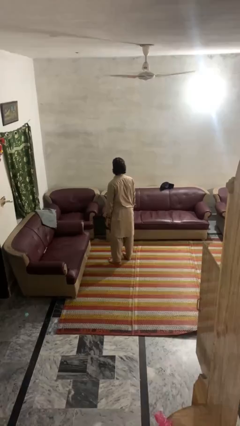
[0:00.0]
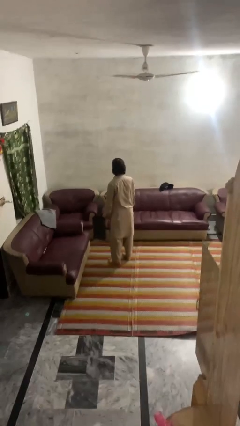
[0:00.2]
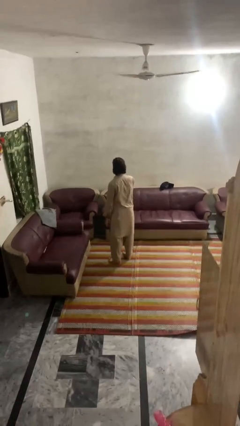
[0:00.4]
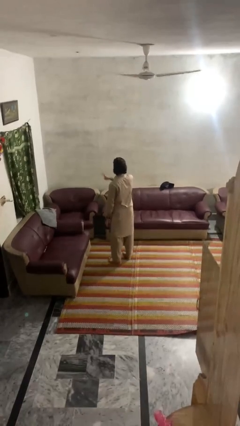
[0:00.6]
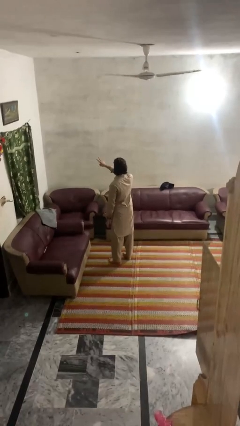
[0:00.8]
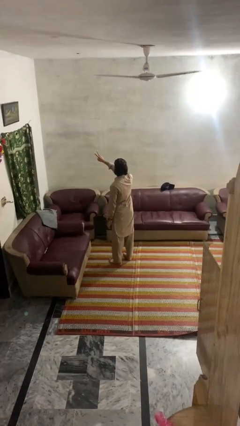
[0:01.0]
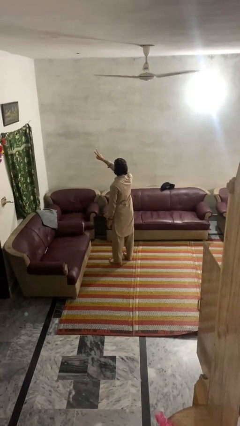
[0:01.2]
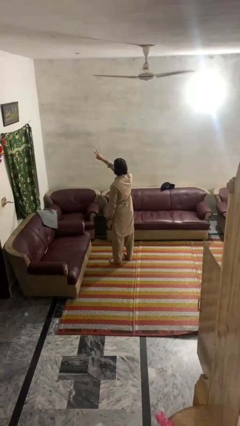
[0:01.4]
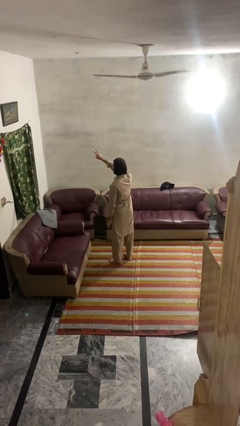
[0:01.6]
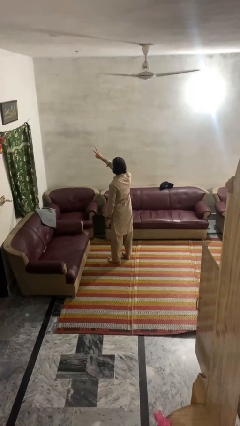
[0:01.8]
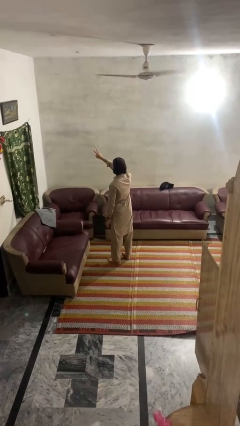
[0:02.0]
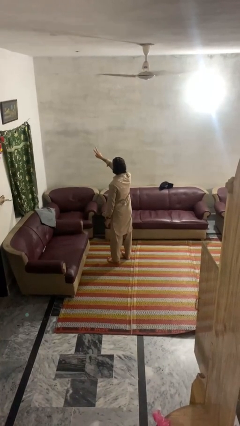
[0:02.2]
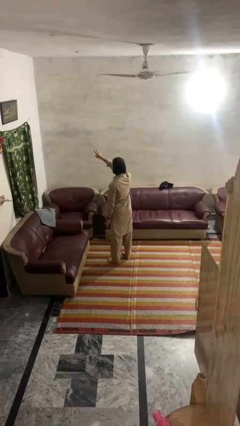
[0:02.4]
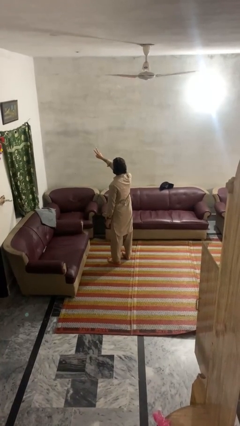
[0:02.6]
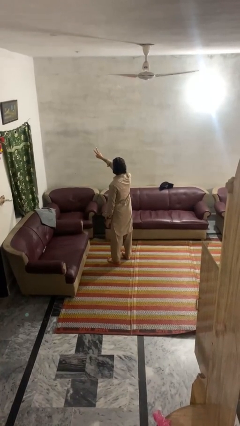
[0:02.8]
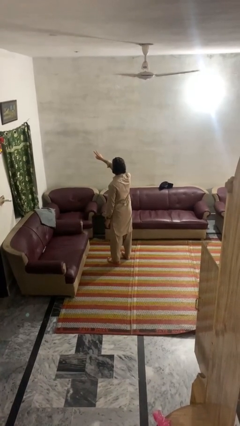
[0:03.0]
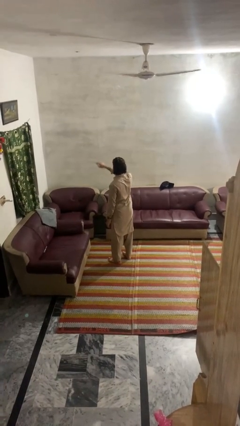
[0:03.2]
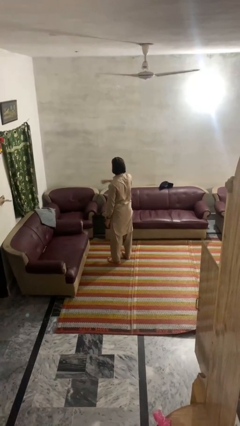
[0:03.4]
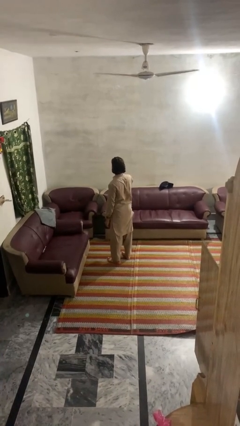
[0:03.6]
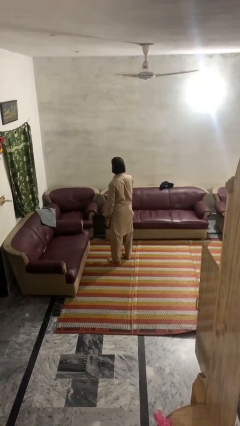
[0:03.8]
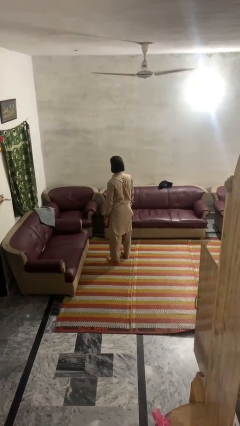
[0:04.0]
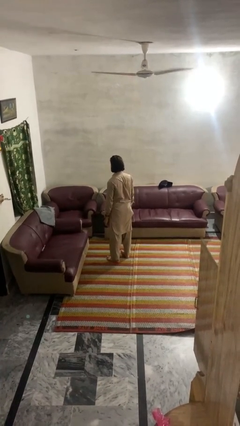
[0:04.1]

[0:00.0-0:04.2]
person gestures peace

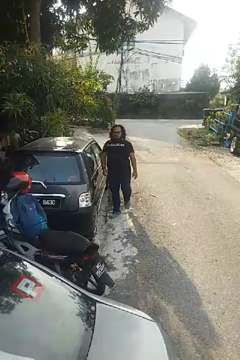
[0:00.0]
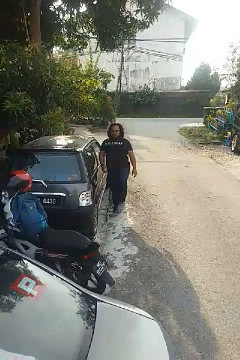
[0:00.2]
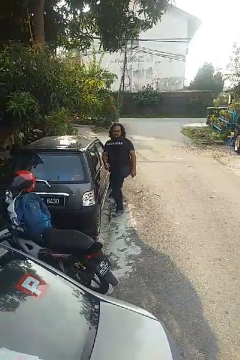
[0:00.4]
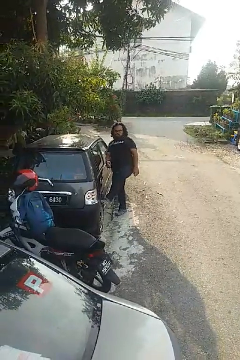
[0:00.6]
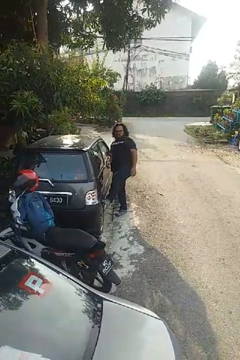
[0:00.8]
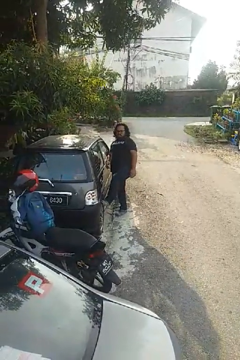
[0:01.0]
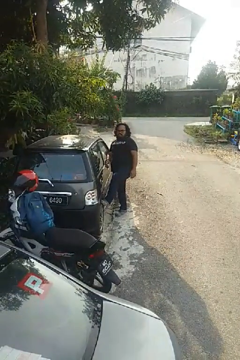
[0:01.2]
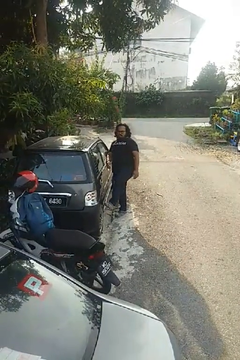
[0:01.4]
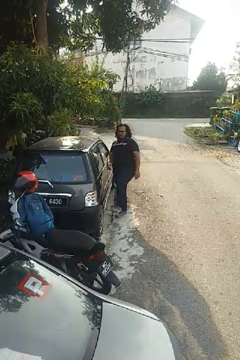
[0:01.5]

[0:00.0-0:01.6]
person kicks car tires

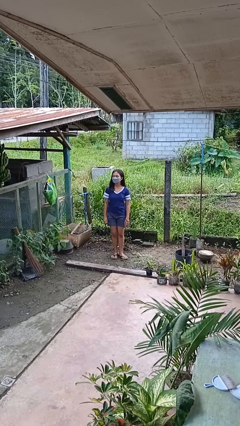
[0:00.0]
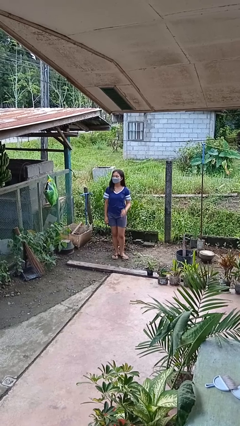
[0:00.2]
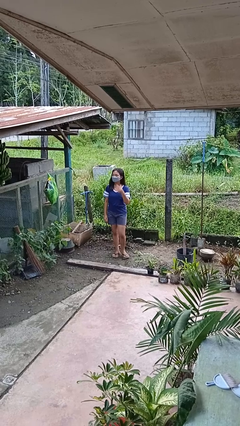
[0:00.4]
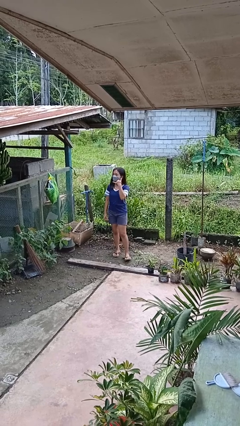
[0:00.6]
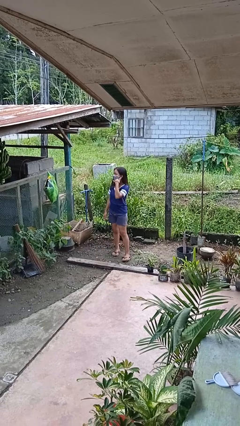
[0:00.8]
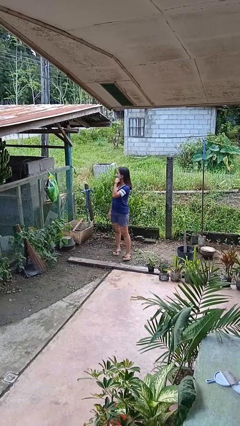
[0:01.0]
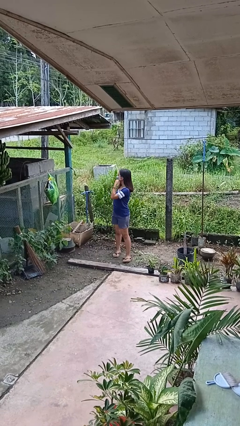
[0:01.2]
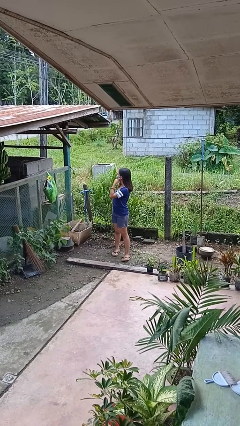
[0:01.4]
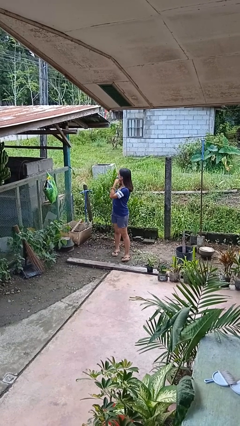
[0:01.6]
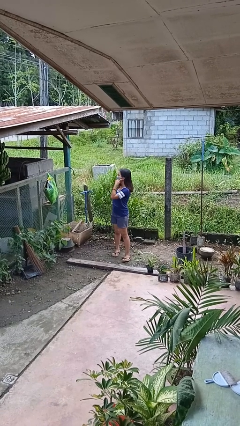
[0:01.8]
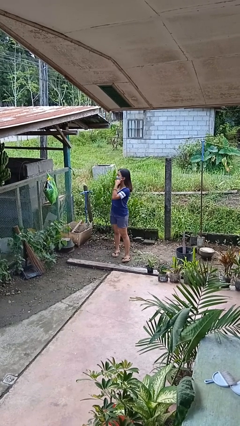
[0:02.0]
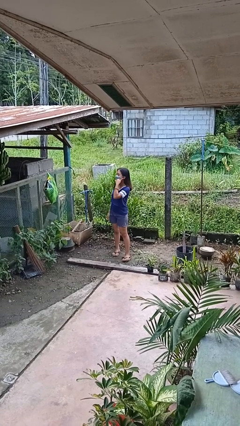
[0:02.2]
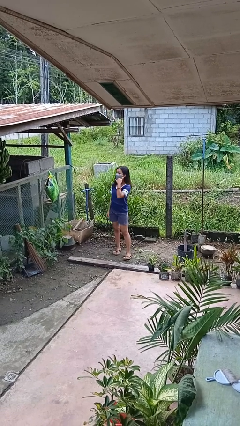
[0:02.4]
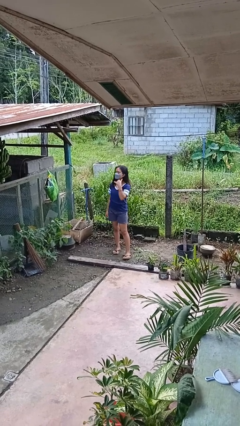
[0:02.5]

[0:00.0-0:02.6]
person gestures call me

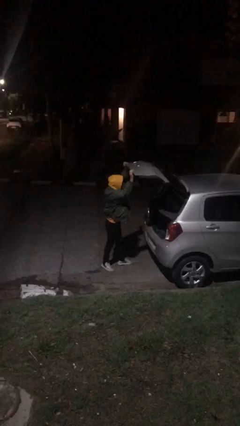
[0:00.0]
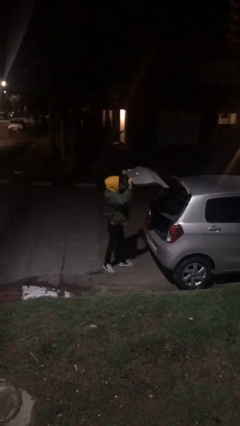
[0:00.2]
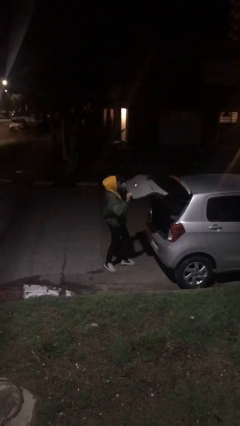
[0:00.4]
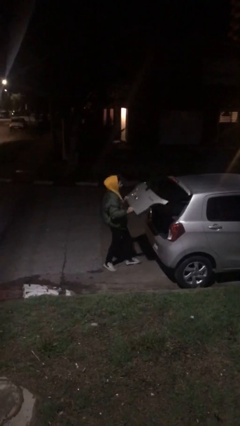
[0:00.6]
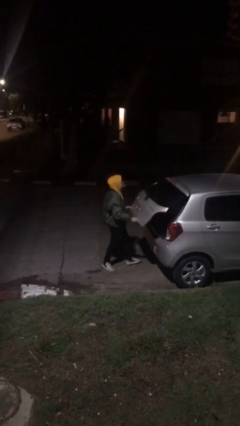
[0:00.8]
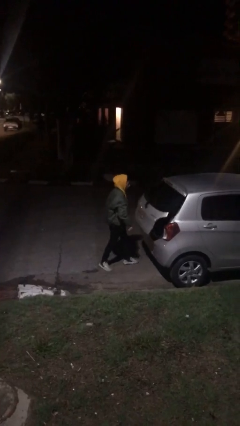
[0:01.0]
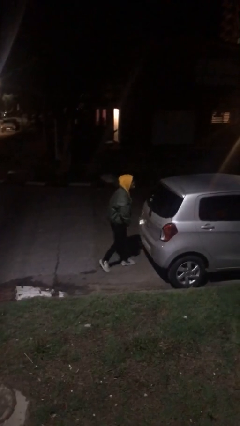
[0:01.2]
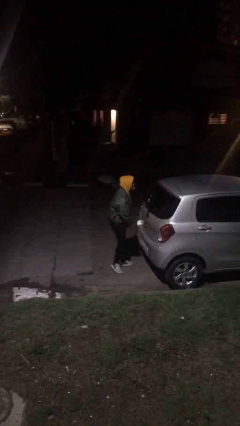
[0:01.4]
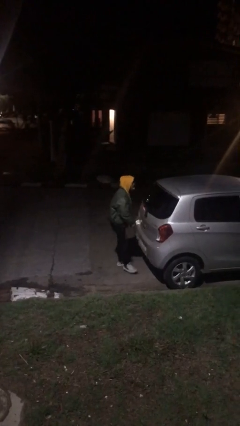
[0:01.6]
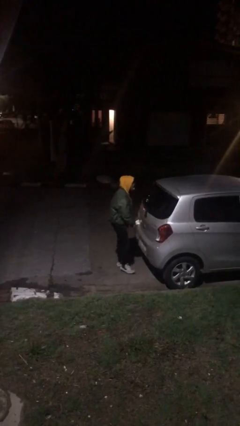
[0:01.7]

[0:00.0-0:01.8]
person closes car trunk

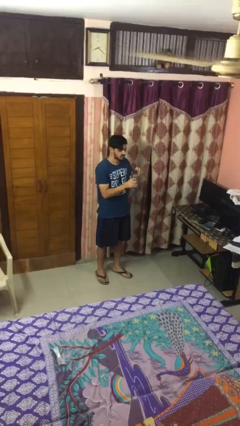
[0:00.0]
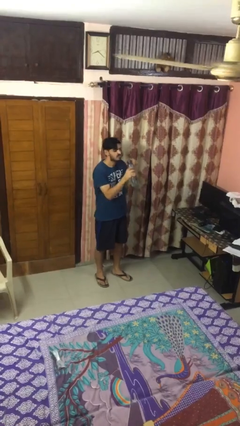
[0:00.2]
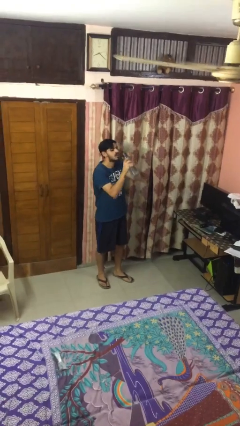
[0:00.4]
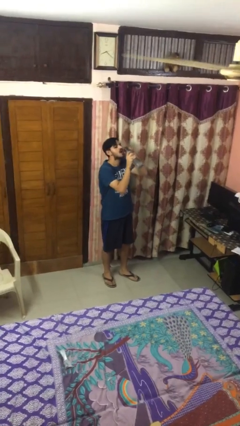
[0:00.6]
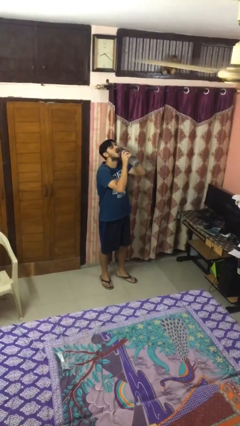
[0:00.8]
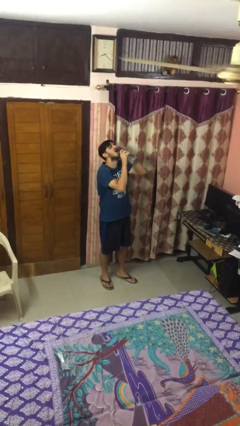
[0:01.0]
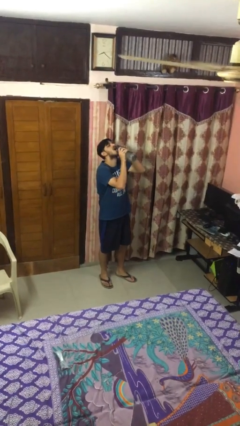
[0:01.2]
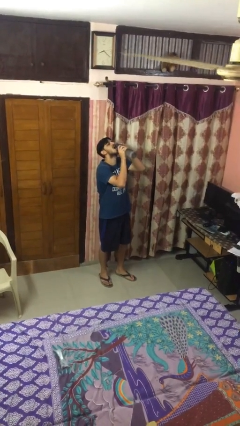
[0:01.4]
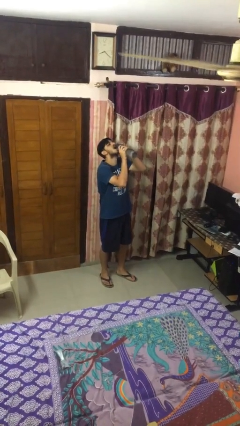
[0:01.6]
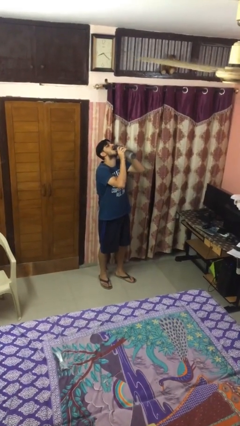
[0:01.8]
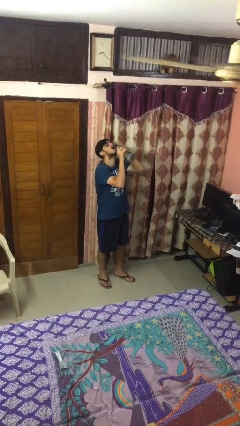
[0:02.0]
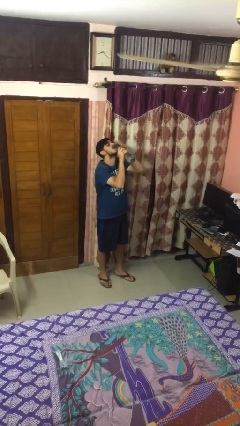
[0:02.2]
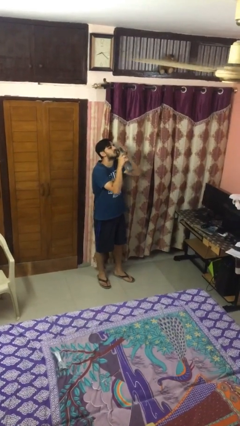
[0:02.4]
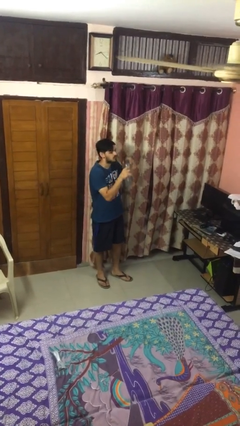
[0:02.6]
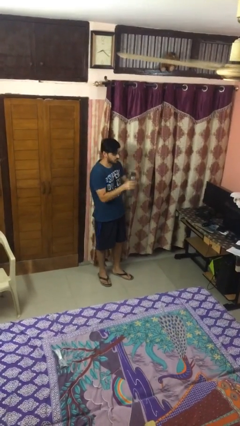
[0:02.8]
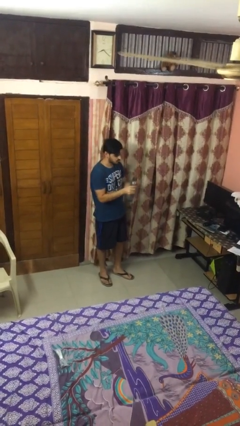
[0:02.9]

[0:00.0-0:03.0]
person drinks from bottle

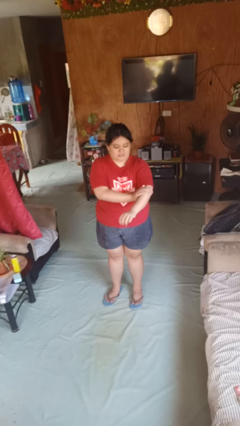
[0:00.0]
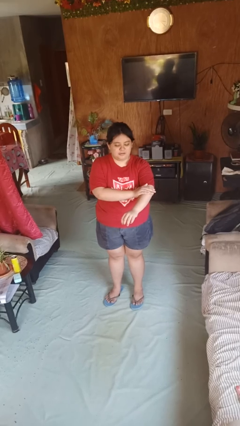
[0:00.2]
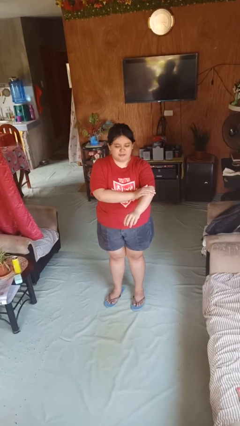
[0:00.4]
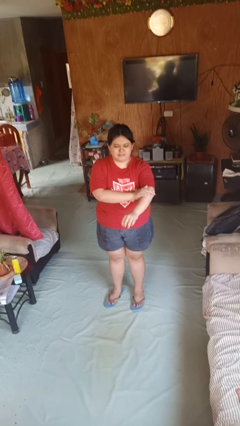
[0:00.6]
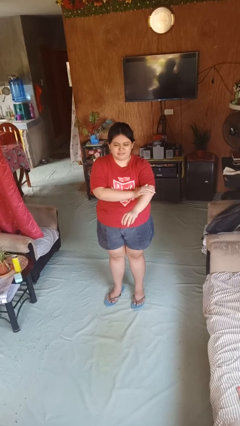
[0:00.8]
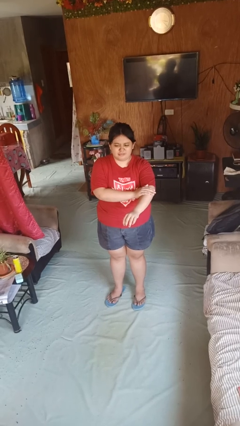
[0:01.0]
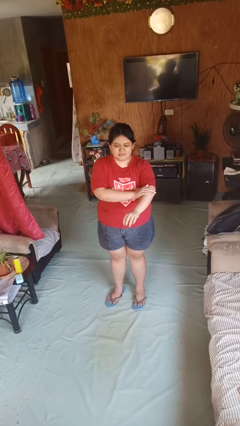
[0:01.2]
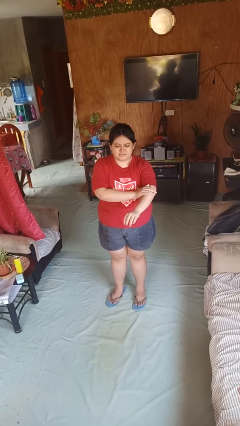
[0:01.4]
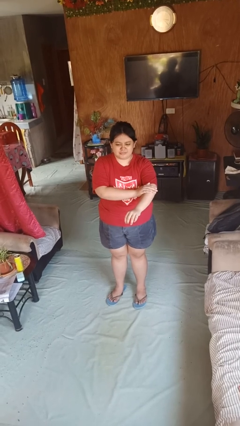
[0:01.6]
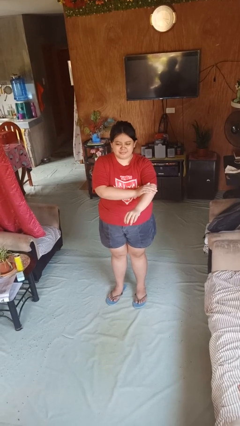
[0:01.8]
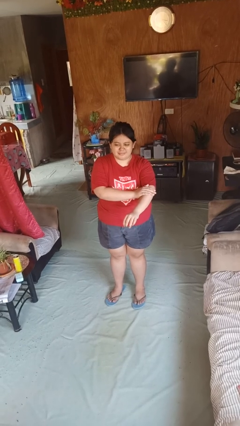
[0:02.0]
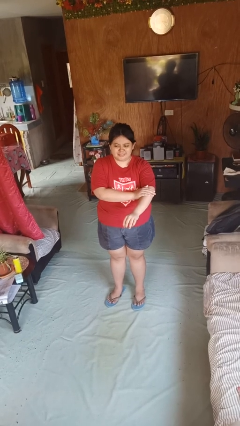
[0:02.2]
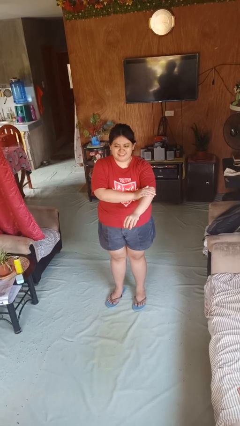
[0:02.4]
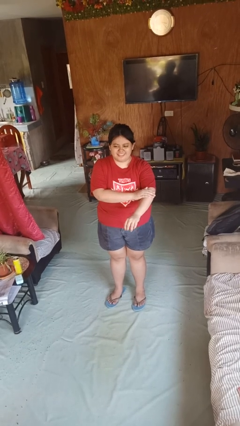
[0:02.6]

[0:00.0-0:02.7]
person swats bug

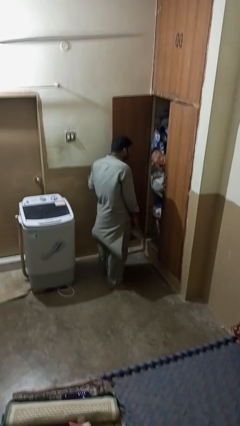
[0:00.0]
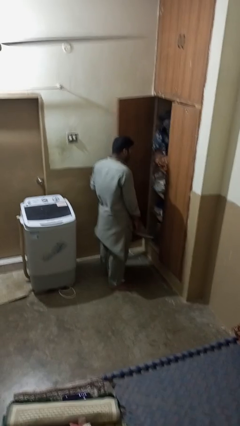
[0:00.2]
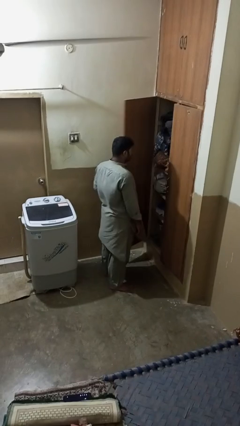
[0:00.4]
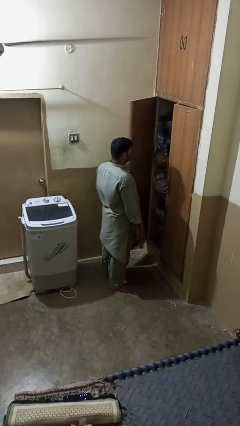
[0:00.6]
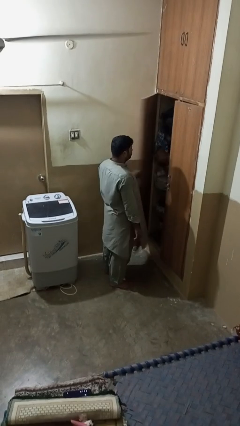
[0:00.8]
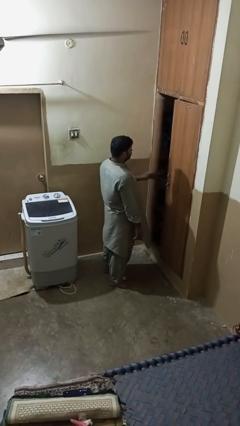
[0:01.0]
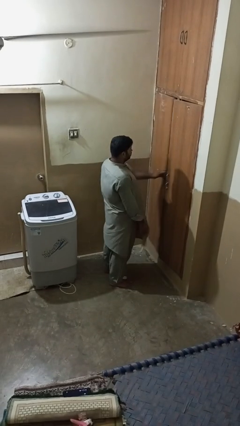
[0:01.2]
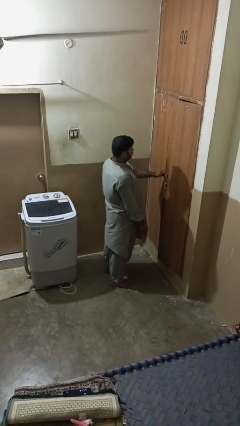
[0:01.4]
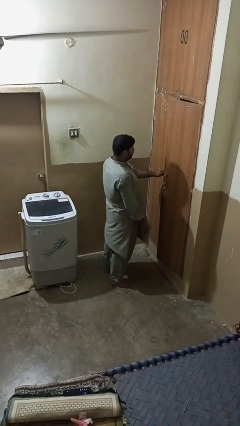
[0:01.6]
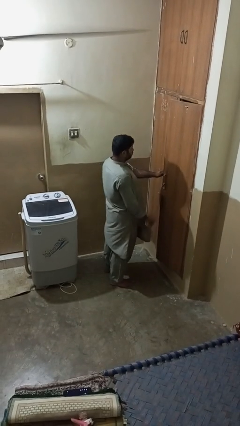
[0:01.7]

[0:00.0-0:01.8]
person closes closet door

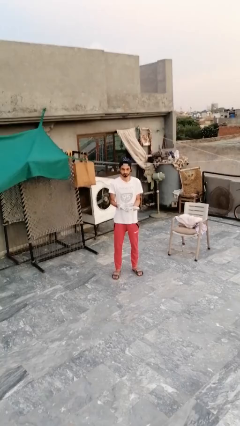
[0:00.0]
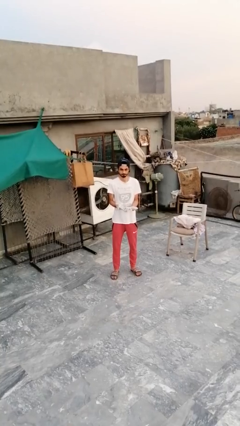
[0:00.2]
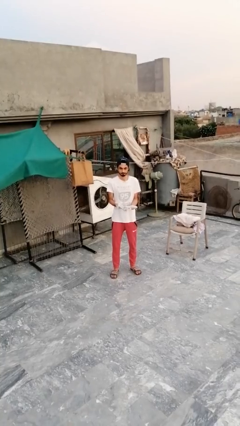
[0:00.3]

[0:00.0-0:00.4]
person takes off gloves
